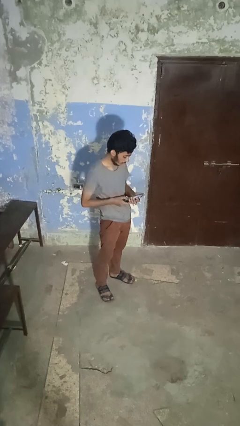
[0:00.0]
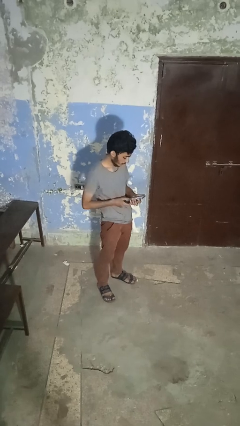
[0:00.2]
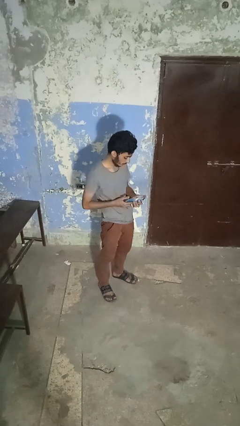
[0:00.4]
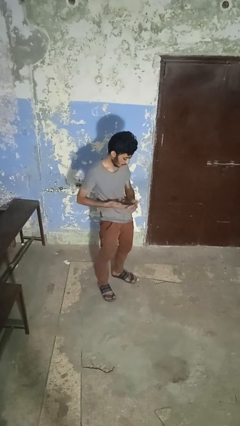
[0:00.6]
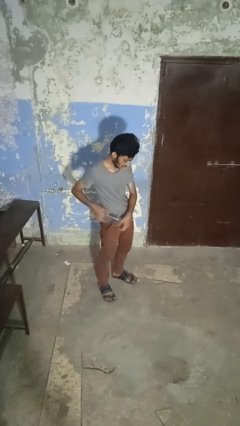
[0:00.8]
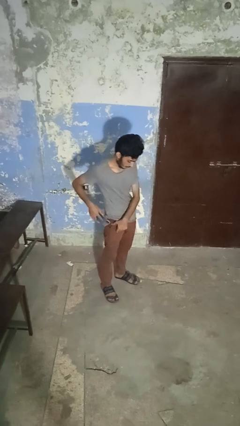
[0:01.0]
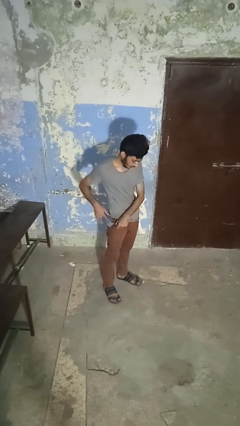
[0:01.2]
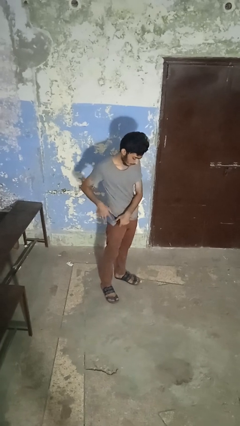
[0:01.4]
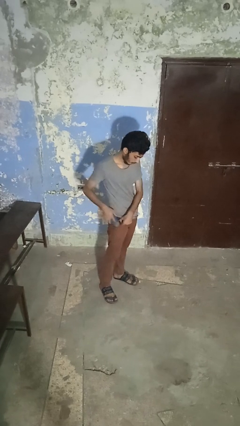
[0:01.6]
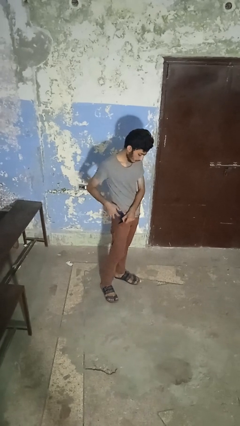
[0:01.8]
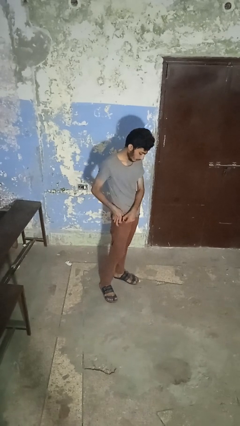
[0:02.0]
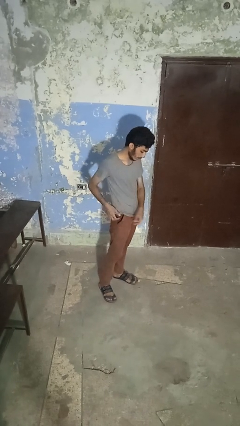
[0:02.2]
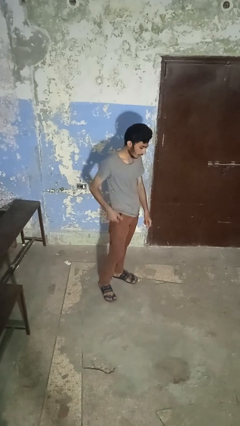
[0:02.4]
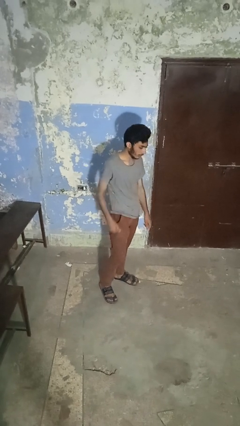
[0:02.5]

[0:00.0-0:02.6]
person puts phone into pocket

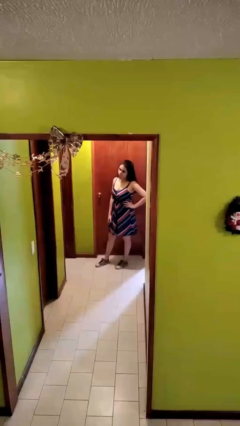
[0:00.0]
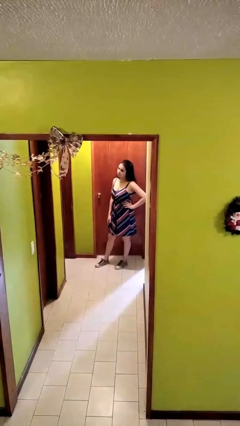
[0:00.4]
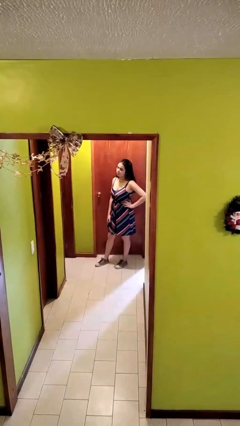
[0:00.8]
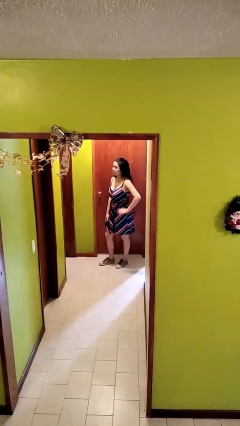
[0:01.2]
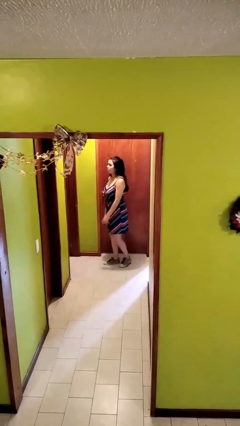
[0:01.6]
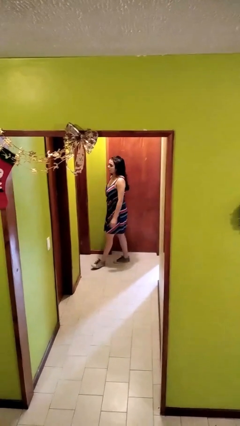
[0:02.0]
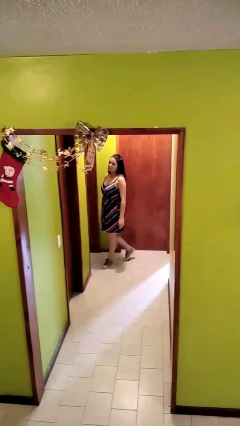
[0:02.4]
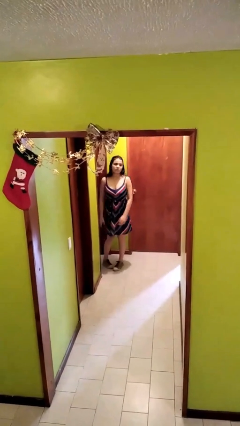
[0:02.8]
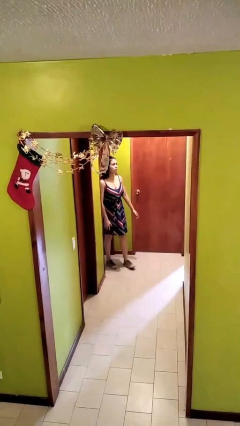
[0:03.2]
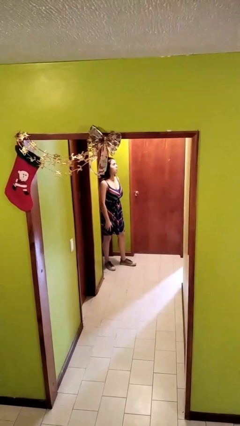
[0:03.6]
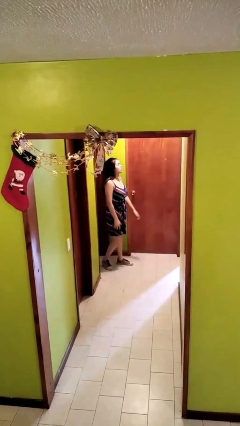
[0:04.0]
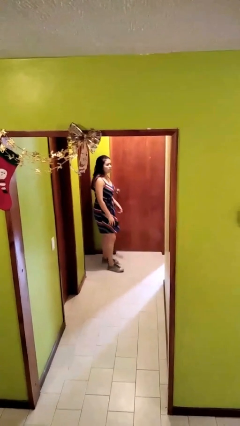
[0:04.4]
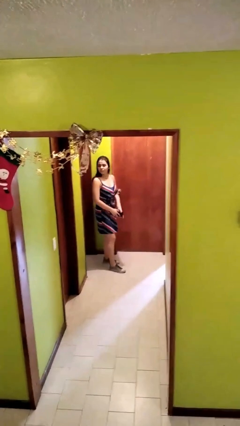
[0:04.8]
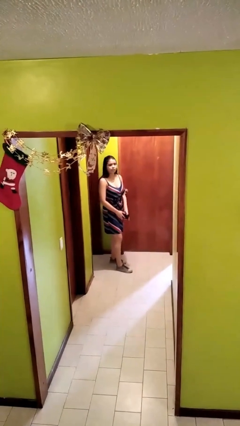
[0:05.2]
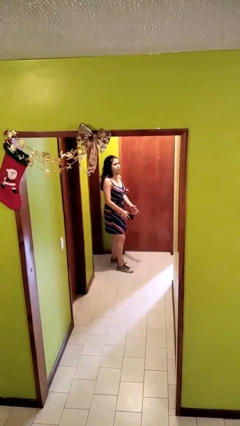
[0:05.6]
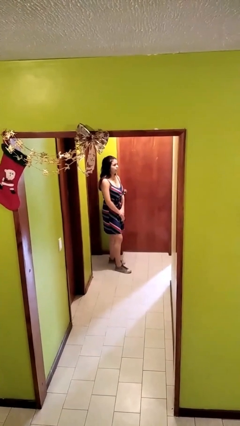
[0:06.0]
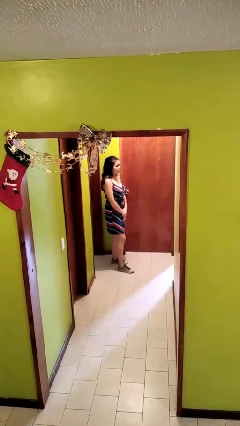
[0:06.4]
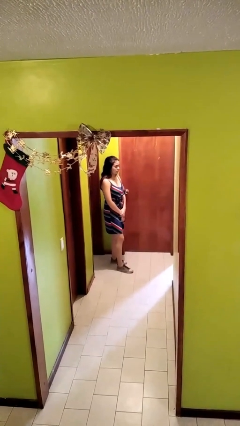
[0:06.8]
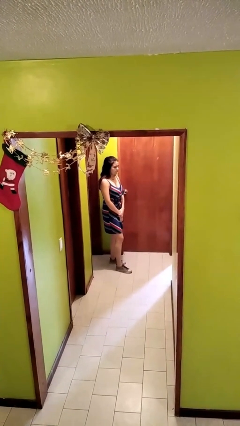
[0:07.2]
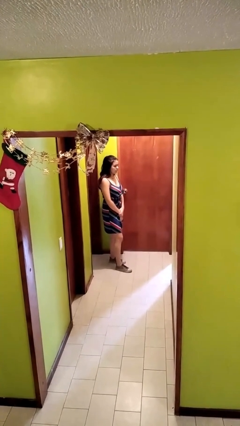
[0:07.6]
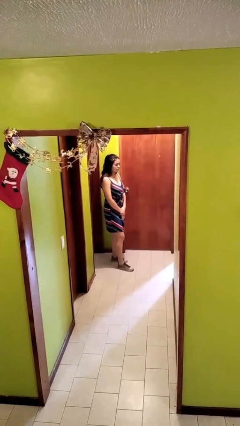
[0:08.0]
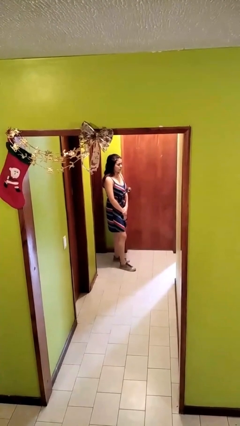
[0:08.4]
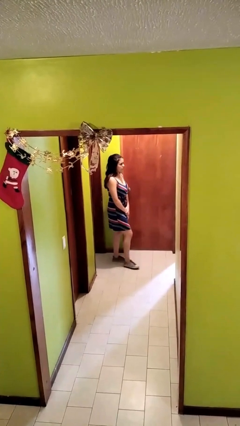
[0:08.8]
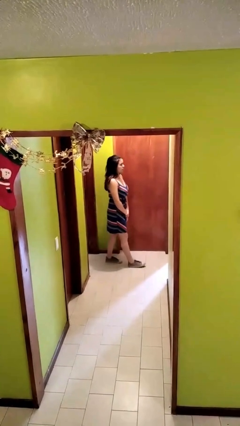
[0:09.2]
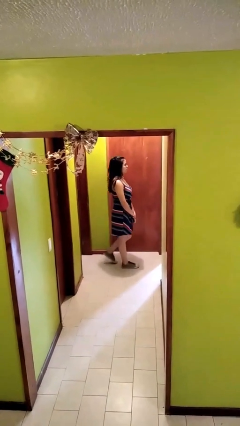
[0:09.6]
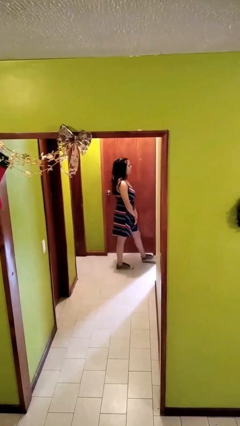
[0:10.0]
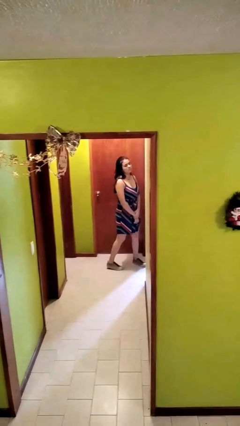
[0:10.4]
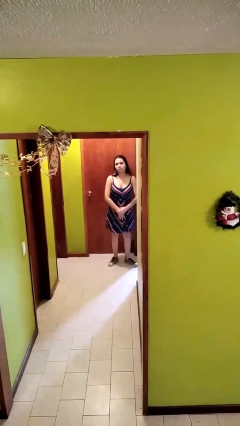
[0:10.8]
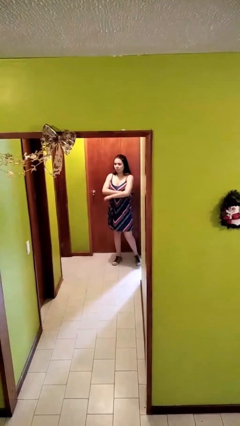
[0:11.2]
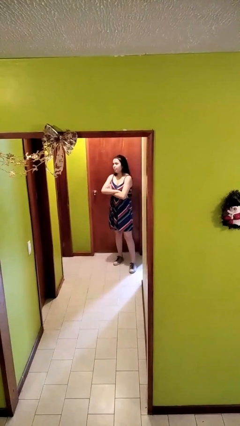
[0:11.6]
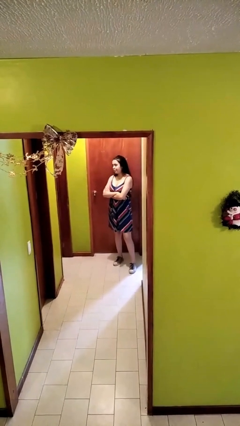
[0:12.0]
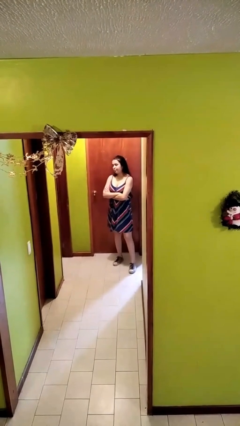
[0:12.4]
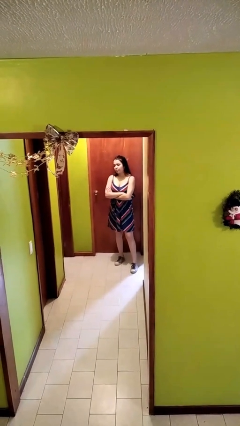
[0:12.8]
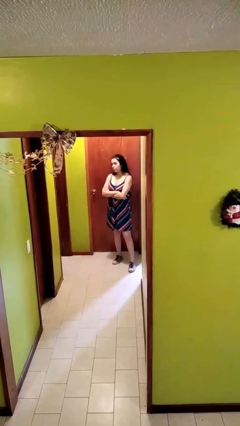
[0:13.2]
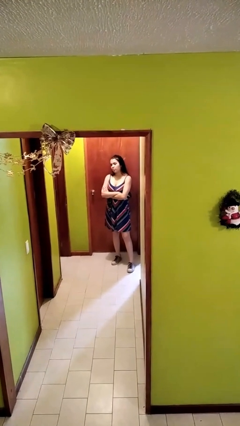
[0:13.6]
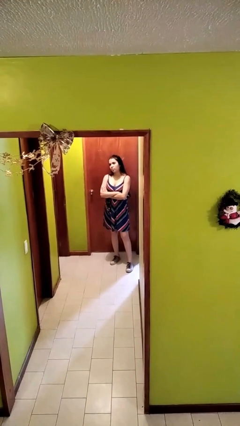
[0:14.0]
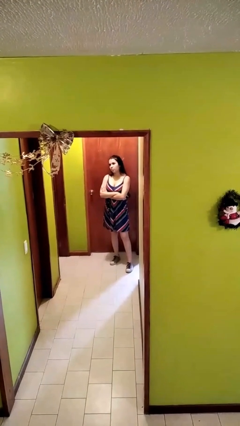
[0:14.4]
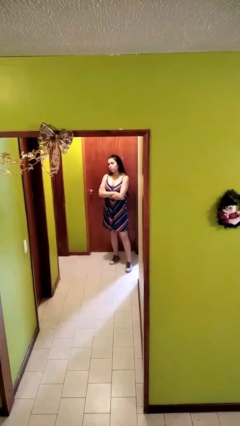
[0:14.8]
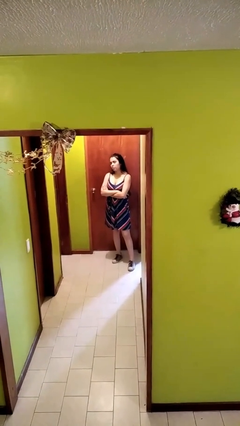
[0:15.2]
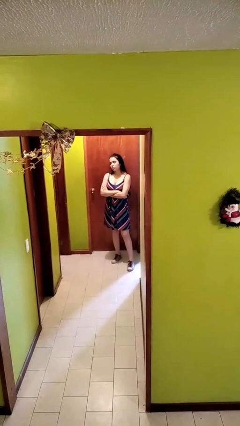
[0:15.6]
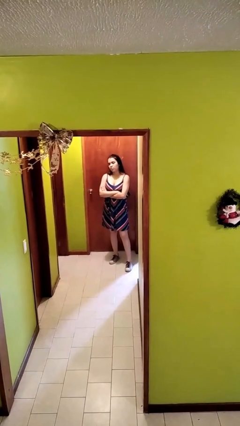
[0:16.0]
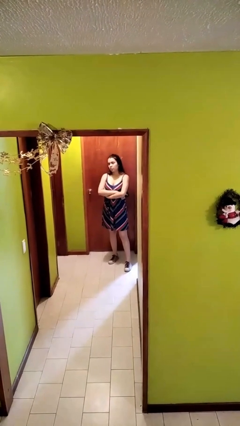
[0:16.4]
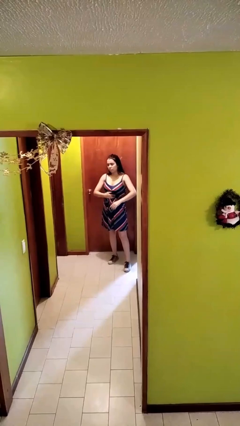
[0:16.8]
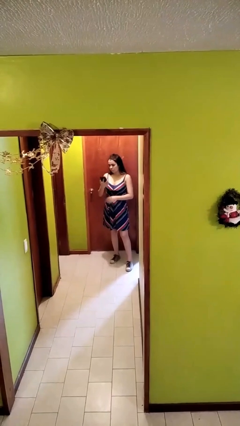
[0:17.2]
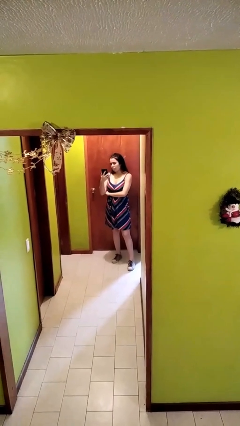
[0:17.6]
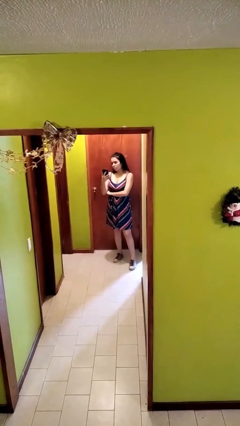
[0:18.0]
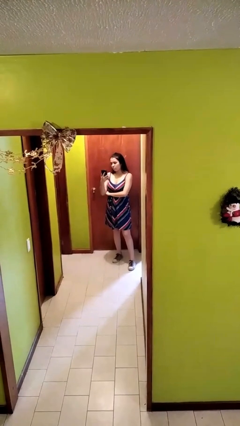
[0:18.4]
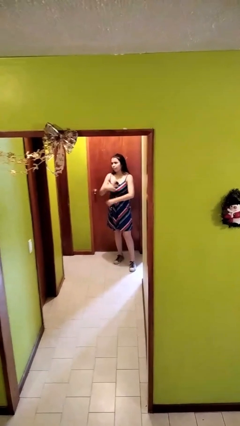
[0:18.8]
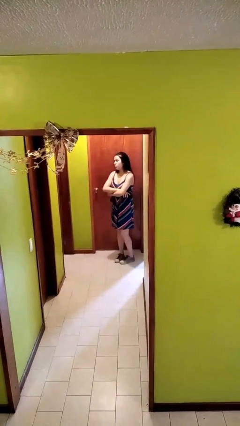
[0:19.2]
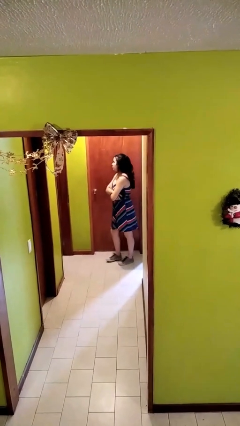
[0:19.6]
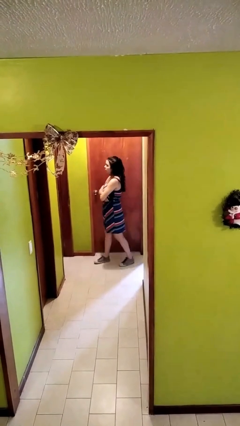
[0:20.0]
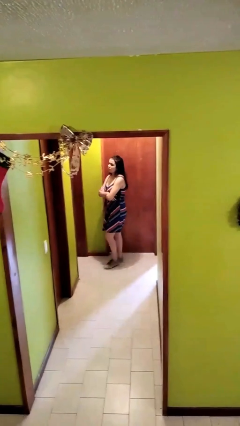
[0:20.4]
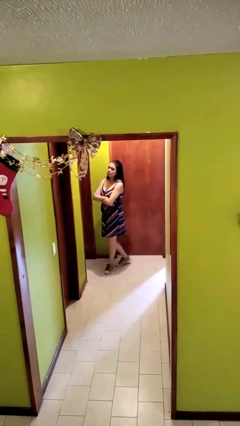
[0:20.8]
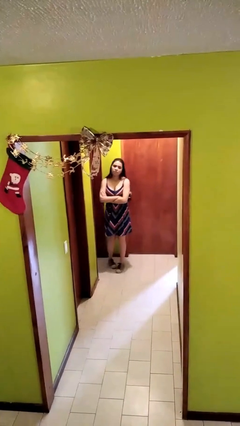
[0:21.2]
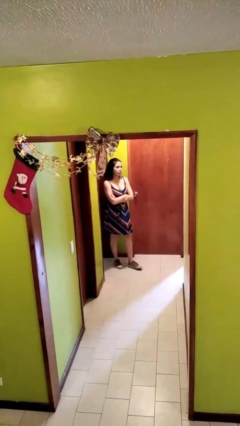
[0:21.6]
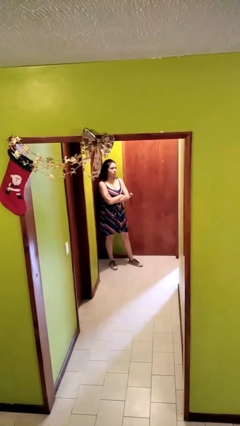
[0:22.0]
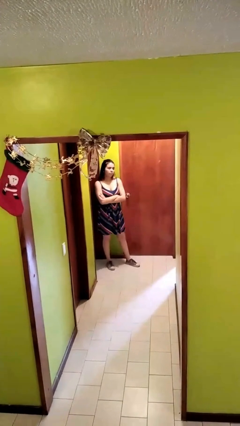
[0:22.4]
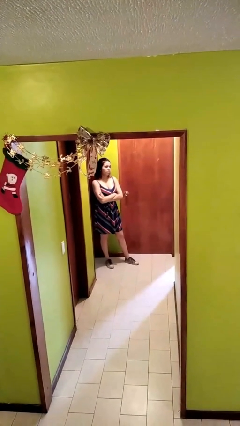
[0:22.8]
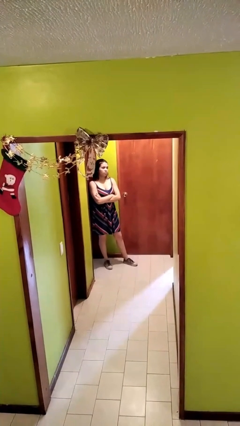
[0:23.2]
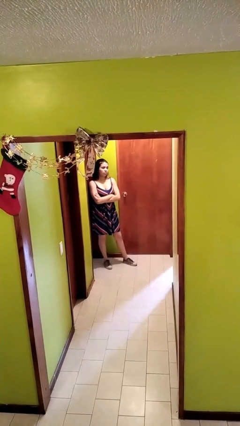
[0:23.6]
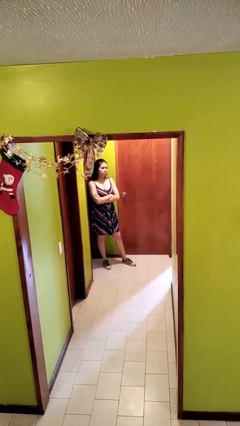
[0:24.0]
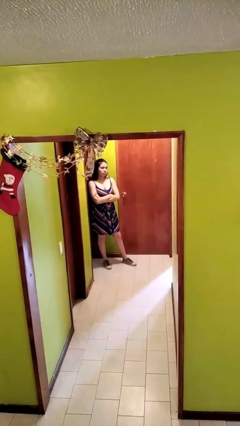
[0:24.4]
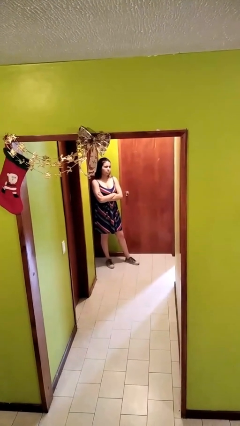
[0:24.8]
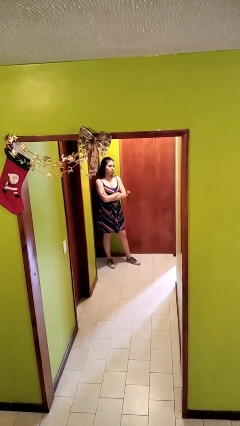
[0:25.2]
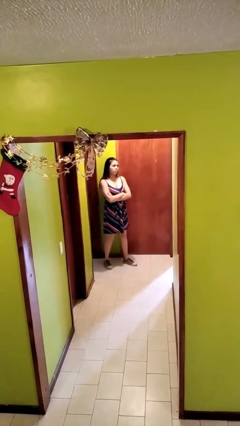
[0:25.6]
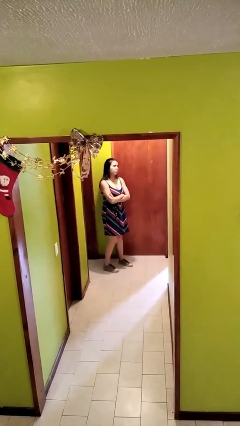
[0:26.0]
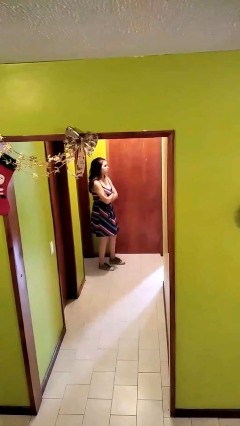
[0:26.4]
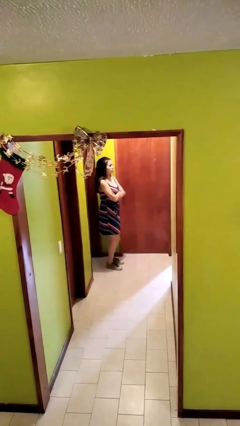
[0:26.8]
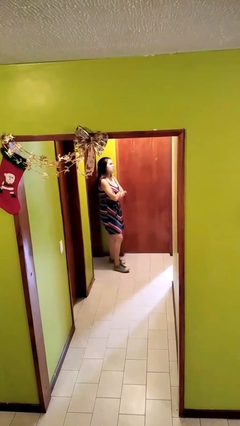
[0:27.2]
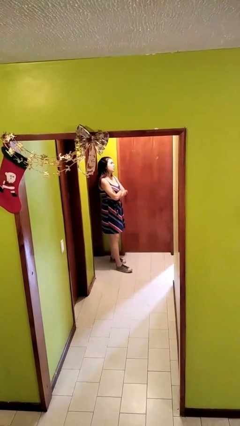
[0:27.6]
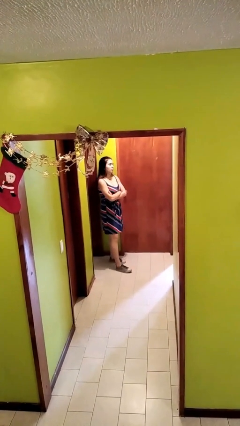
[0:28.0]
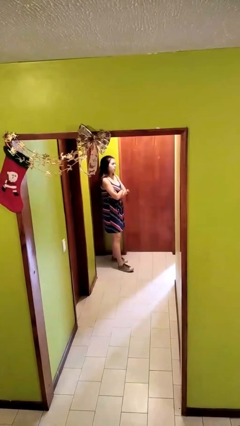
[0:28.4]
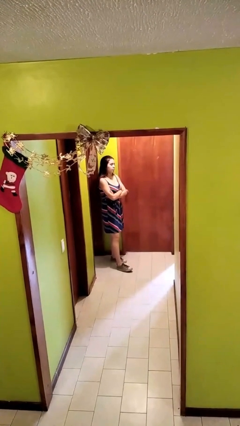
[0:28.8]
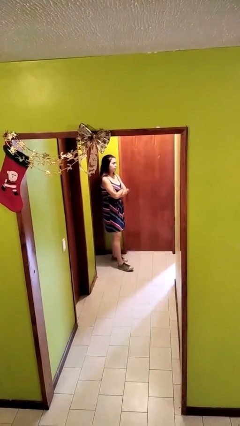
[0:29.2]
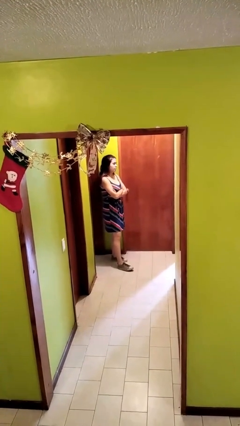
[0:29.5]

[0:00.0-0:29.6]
person walks

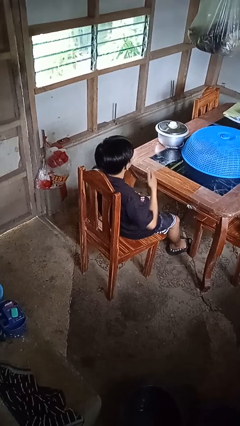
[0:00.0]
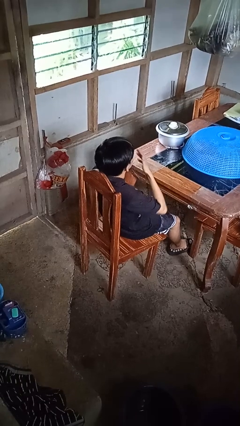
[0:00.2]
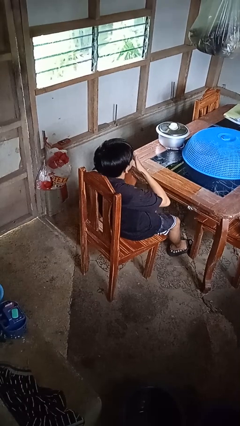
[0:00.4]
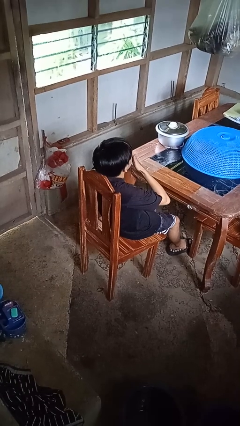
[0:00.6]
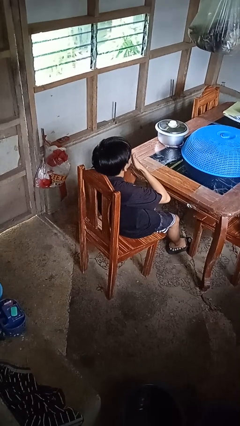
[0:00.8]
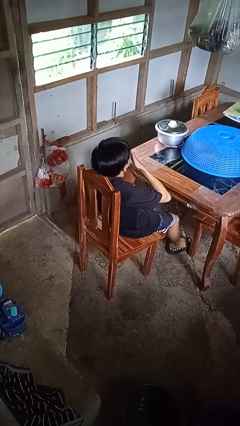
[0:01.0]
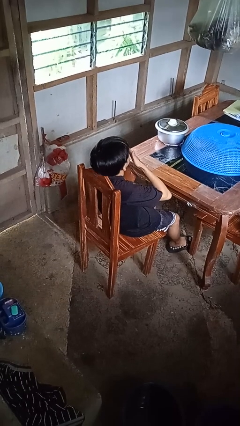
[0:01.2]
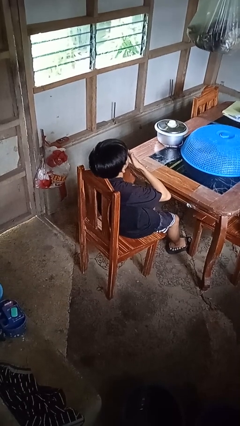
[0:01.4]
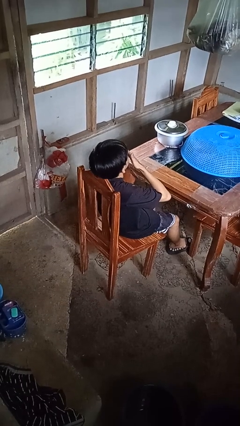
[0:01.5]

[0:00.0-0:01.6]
person yawns
